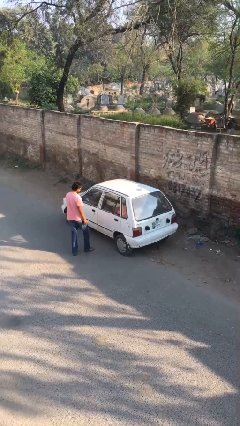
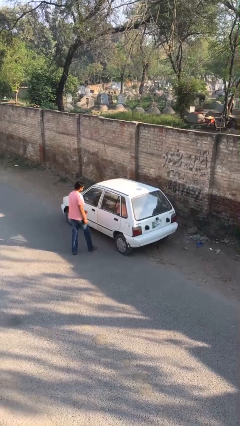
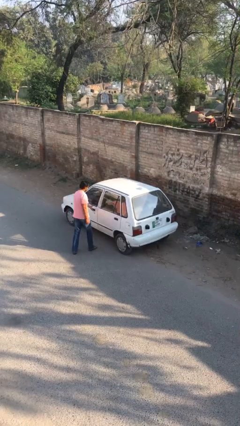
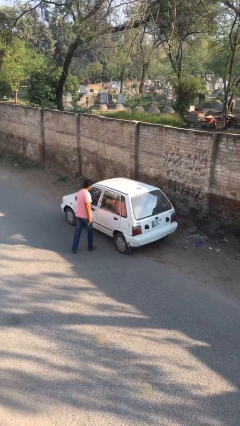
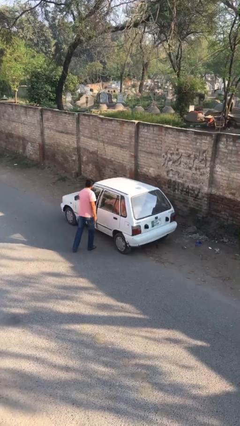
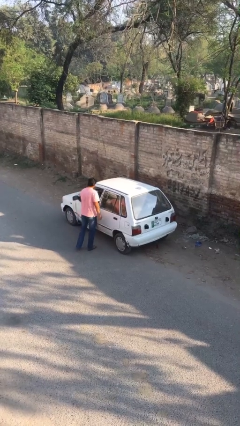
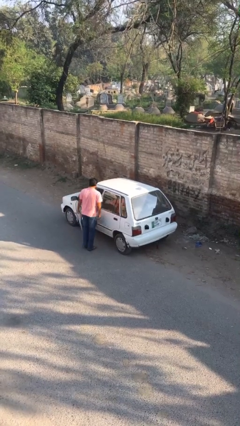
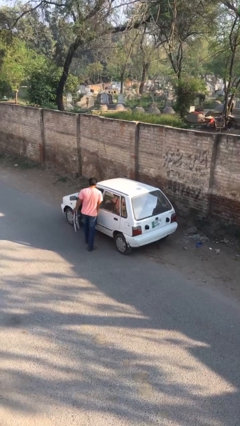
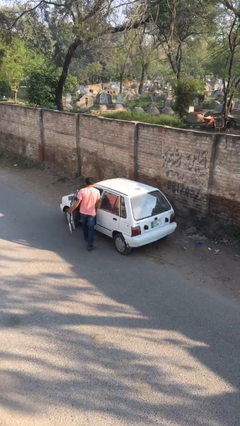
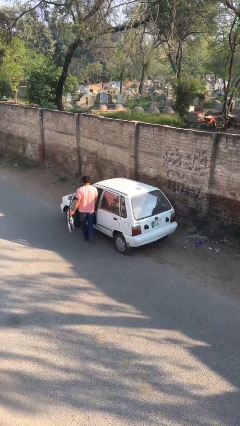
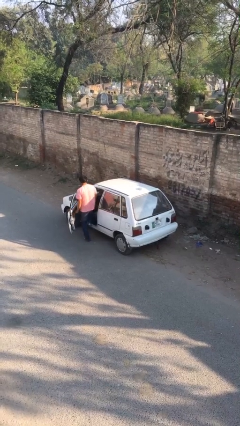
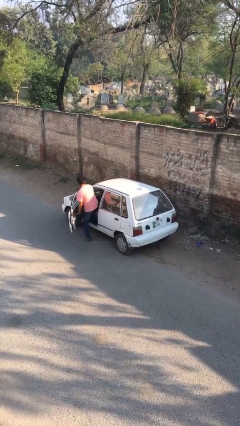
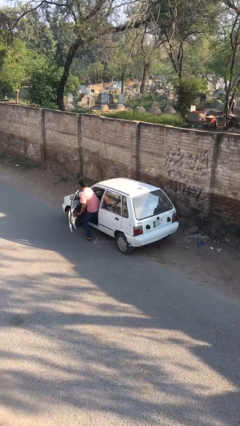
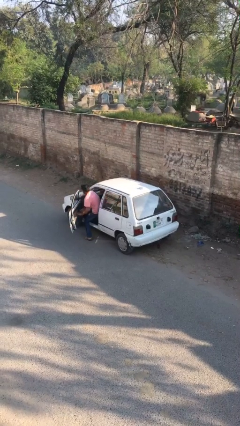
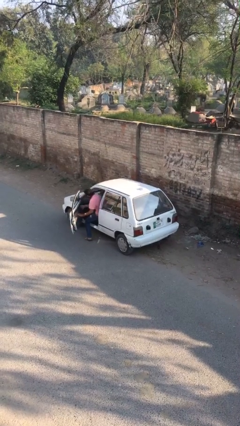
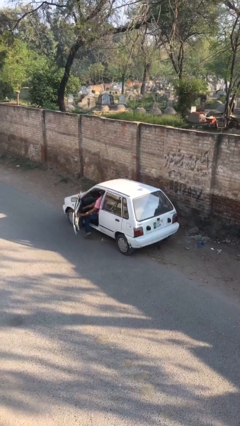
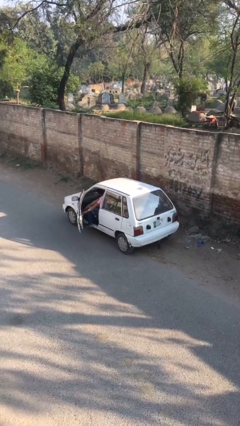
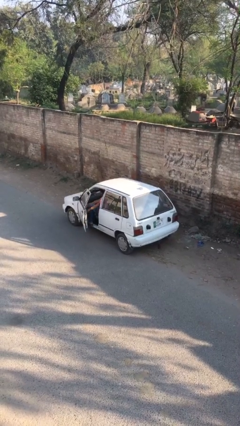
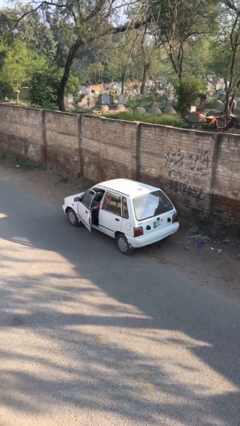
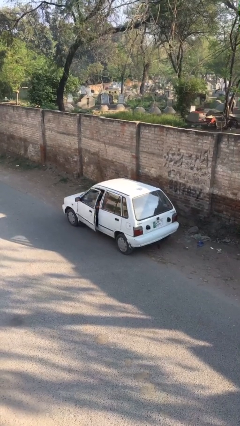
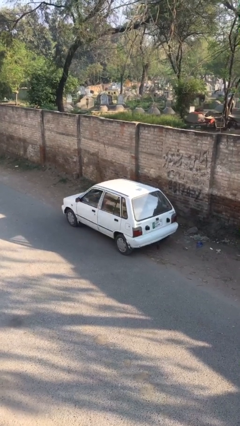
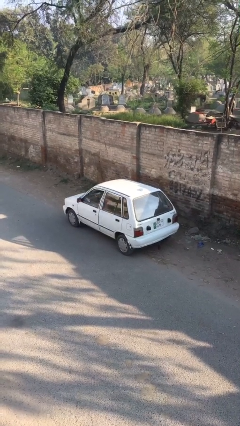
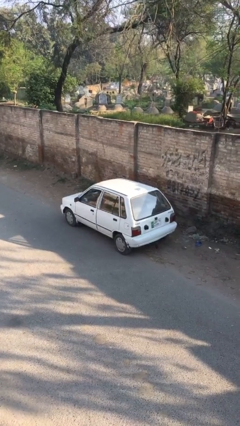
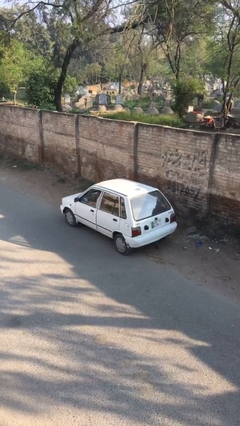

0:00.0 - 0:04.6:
car picks up person

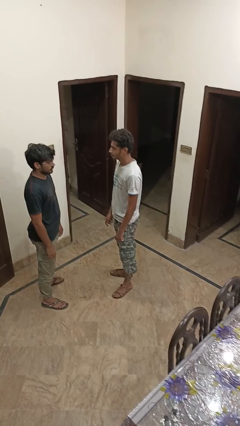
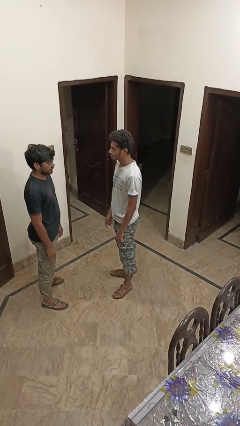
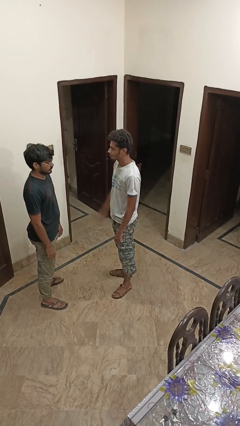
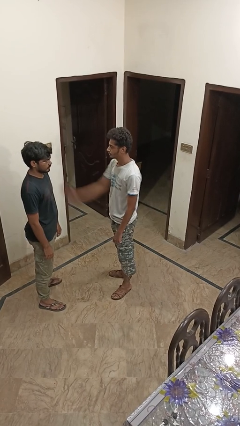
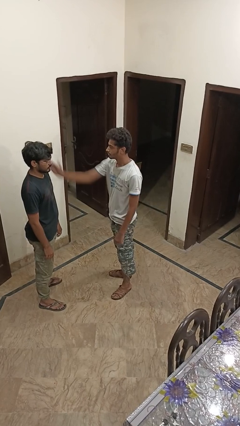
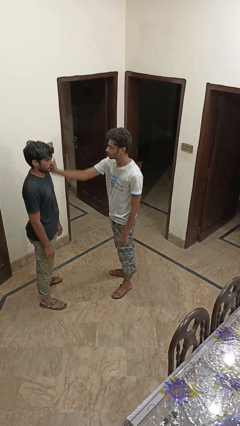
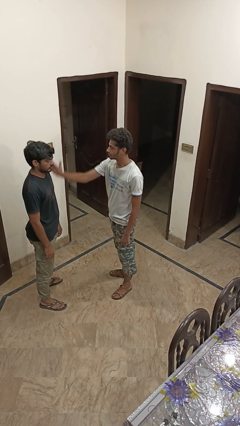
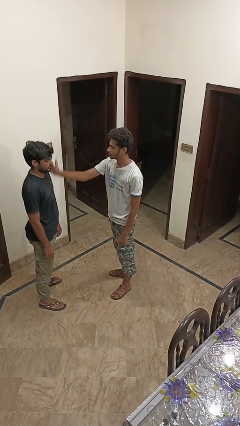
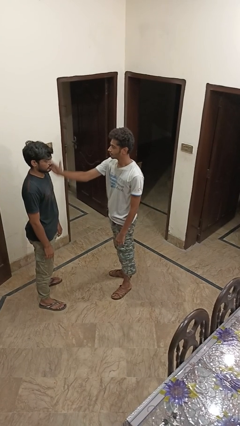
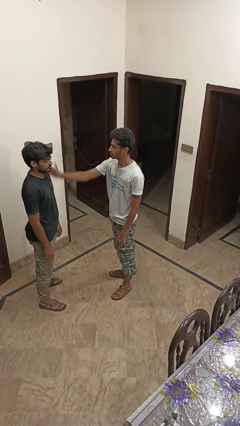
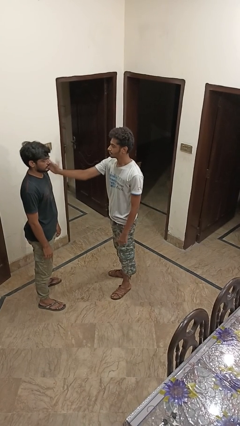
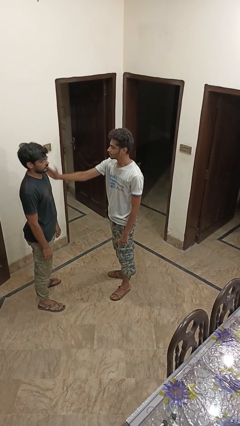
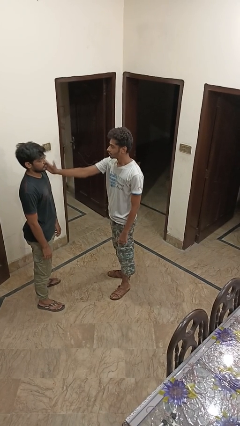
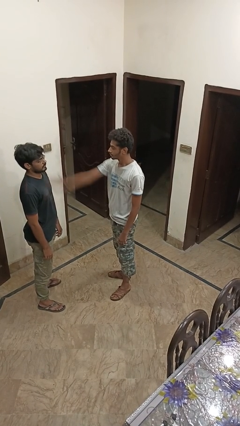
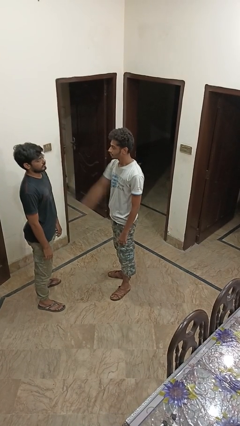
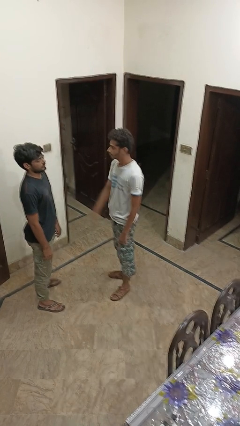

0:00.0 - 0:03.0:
person touches face of person

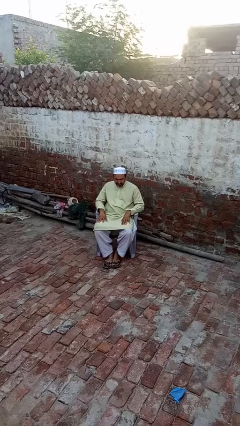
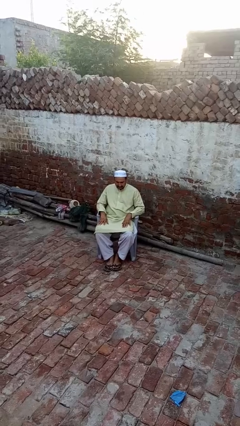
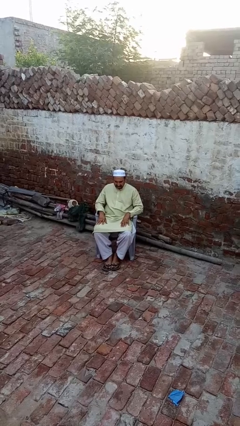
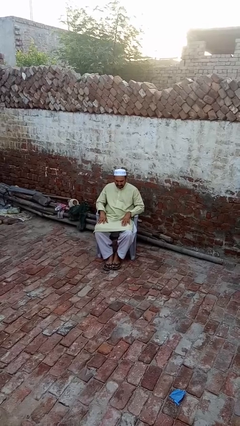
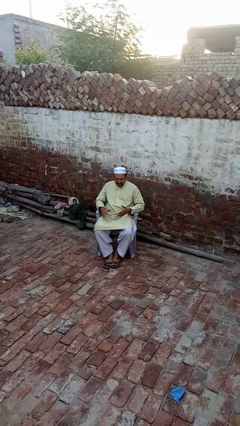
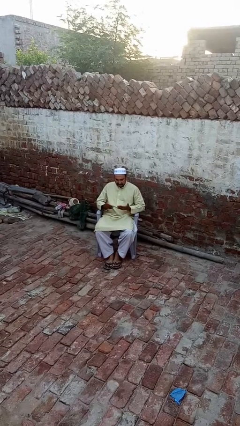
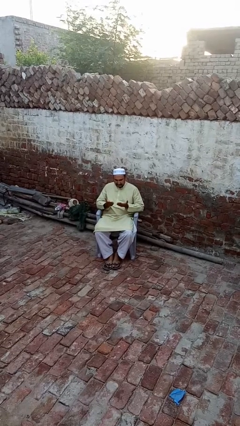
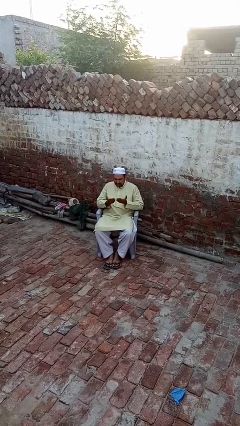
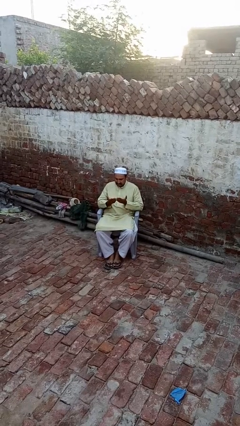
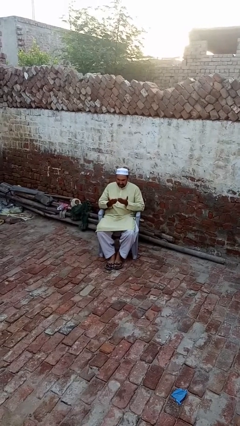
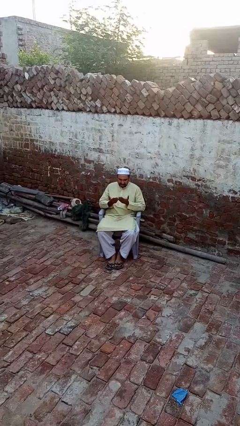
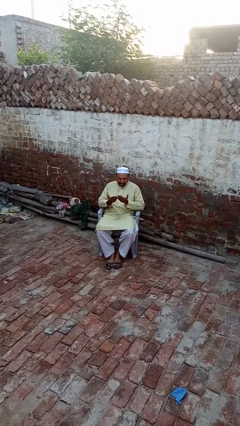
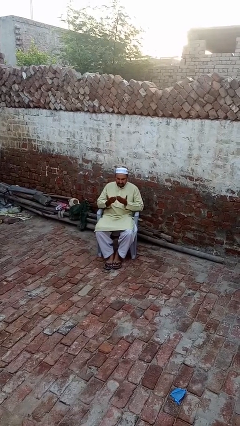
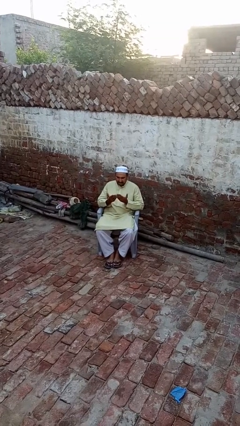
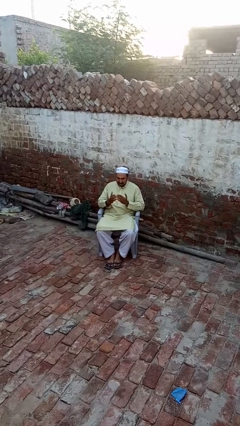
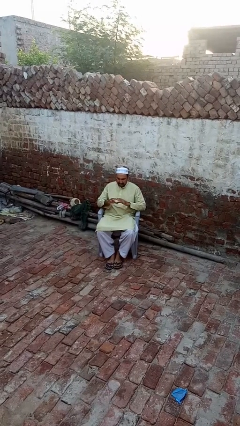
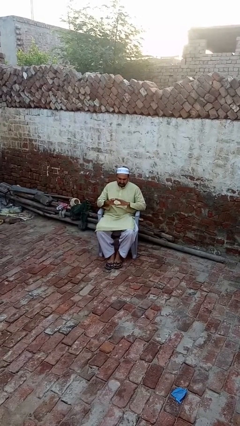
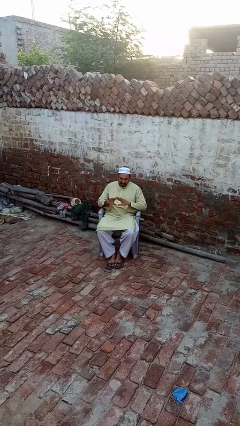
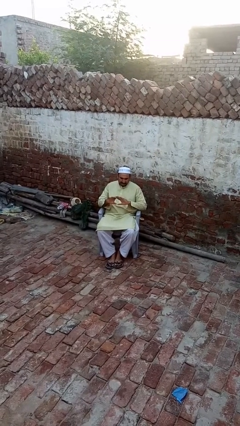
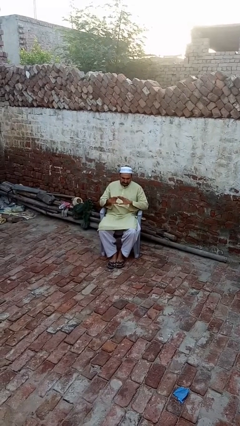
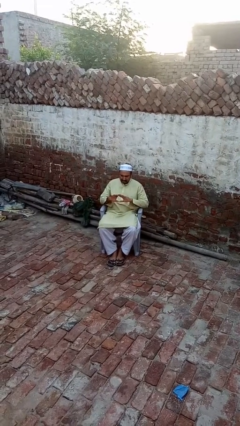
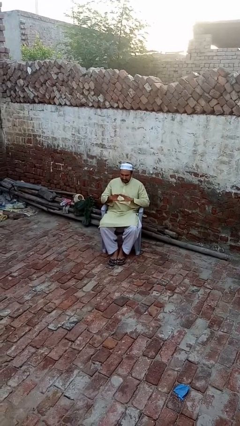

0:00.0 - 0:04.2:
person looks at hands in lap

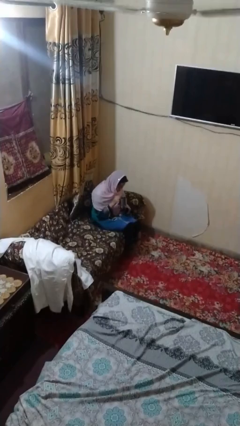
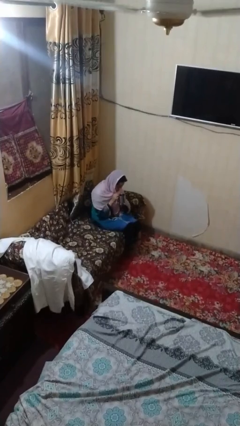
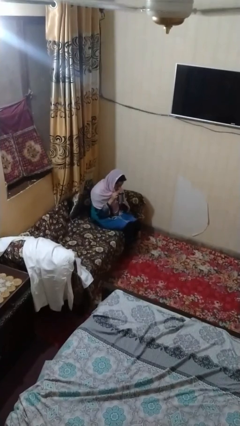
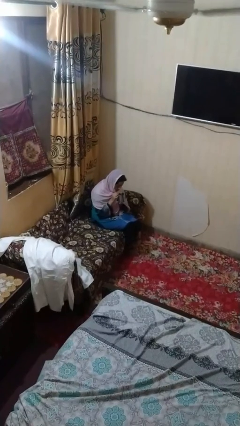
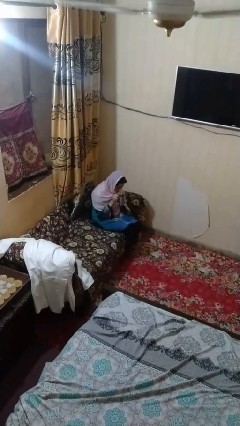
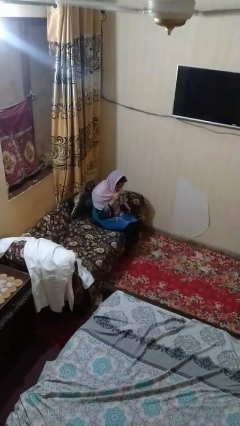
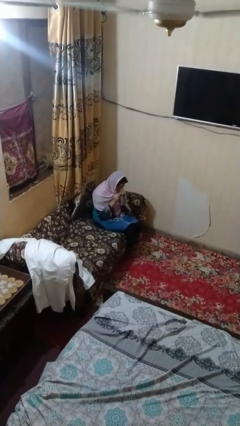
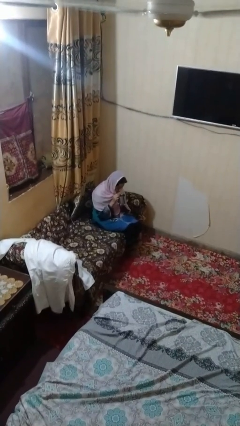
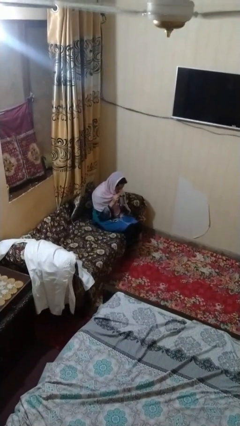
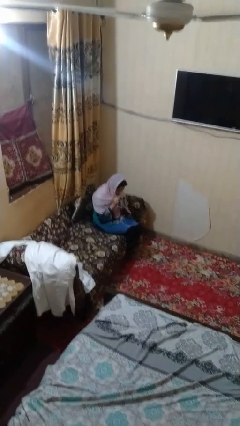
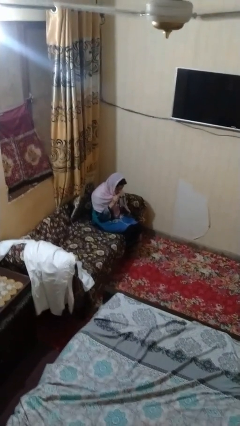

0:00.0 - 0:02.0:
person drinks from straw

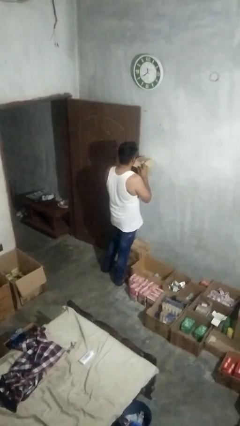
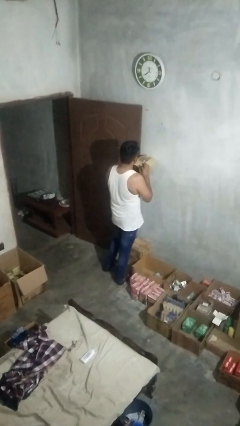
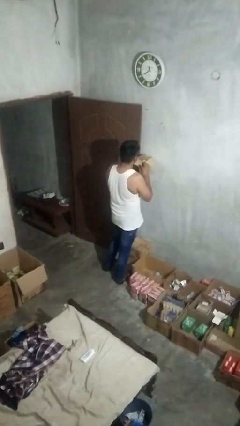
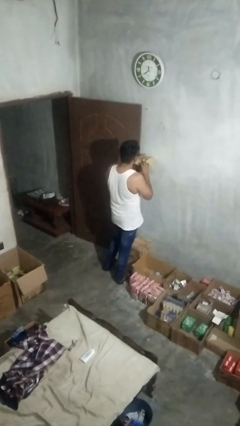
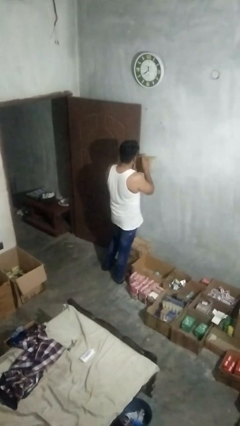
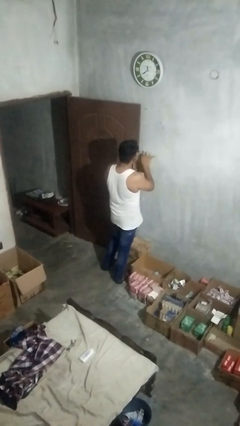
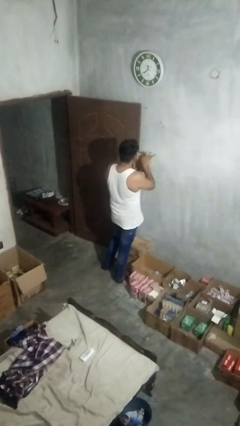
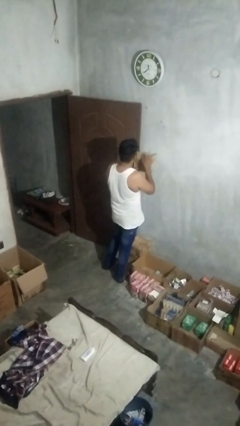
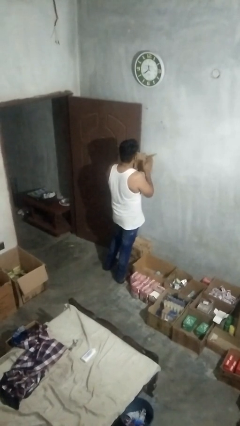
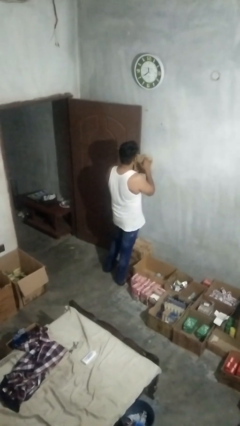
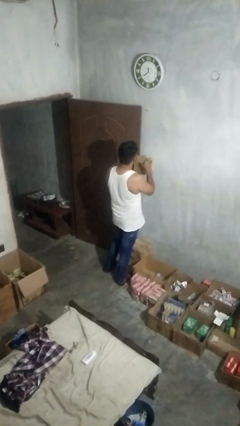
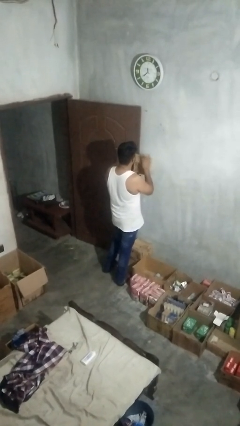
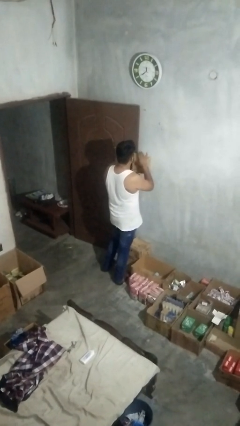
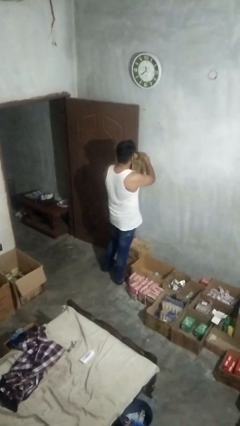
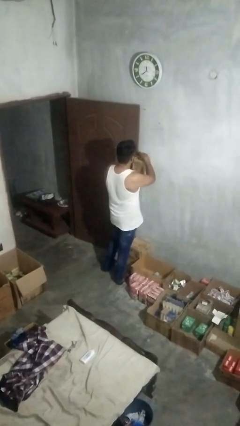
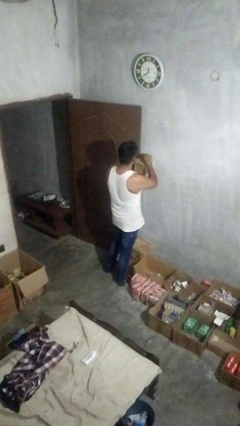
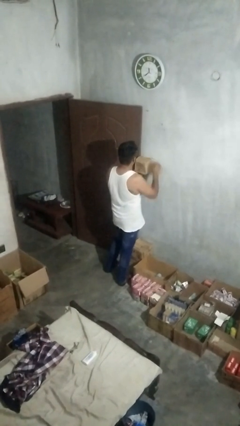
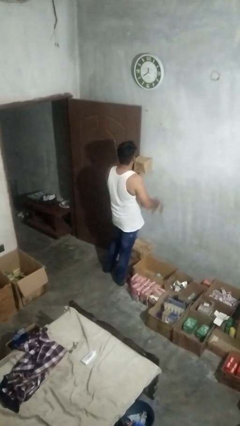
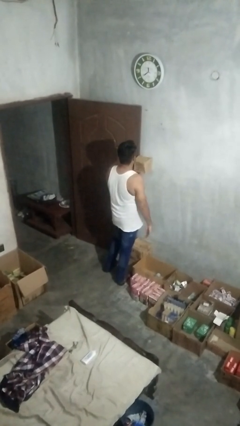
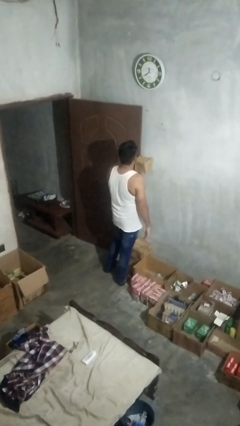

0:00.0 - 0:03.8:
person closes mailbox
